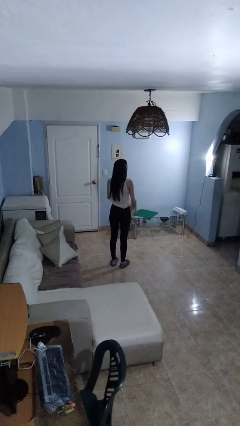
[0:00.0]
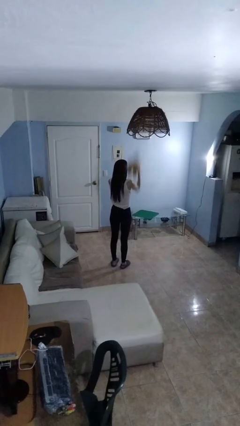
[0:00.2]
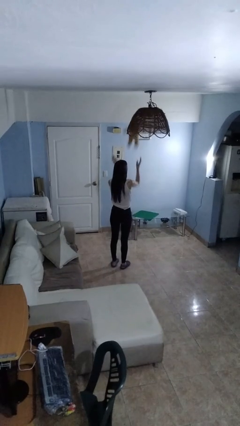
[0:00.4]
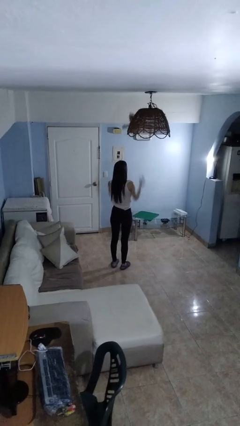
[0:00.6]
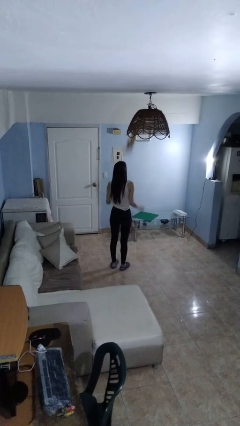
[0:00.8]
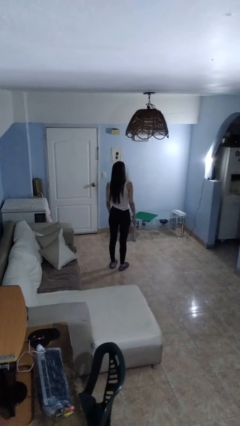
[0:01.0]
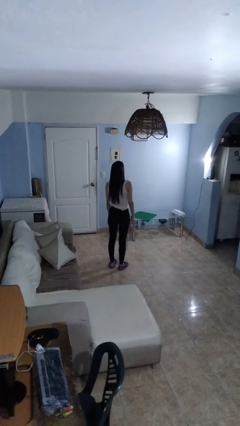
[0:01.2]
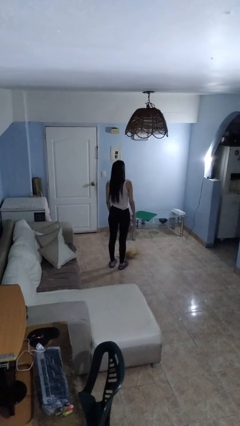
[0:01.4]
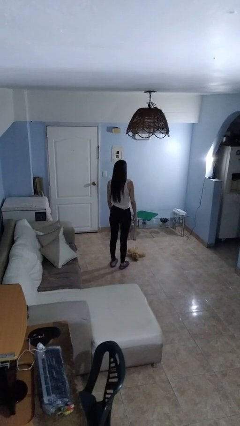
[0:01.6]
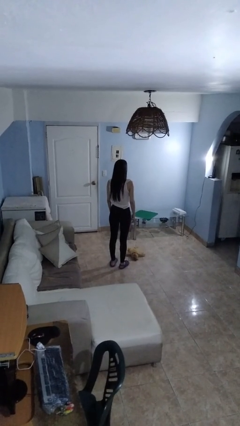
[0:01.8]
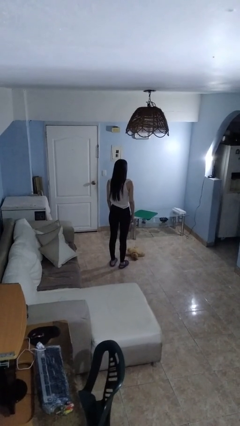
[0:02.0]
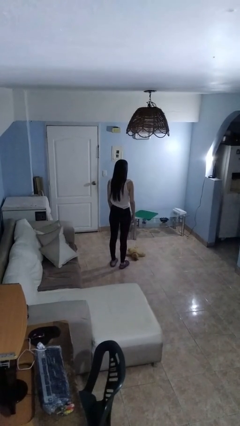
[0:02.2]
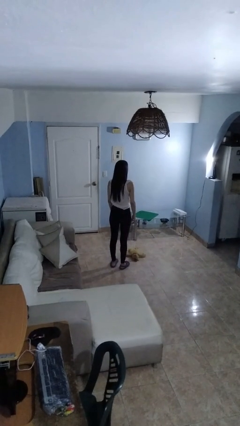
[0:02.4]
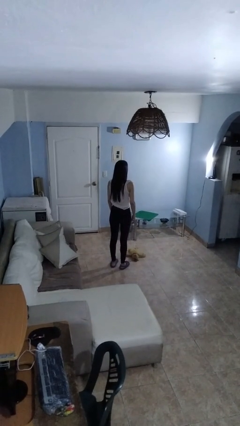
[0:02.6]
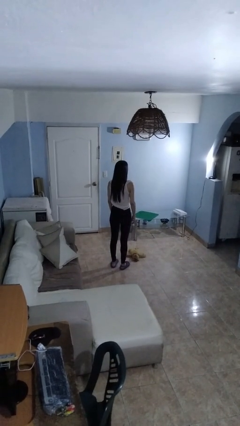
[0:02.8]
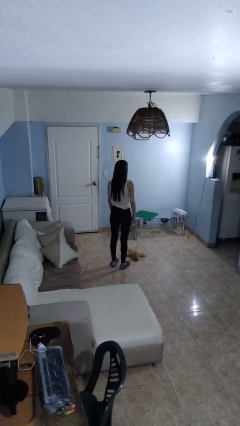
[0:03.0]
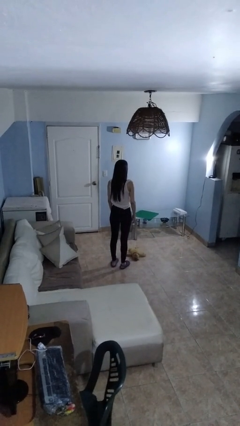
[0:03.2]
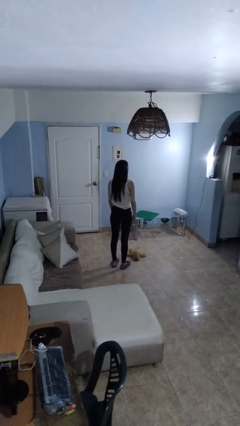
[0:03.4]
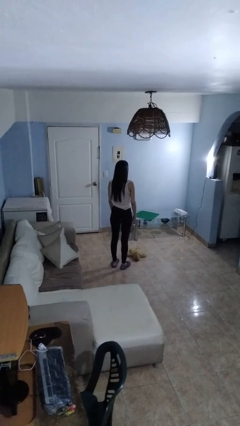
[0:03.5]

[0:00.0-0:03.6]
person throws object into air

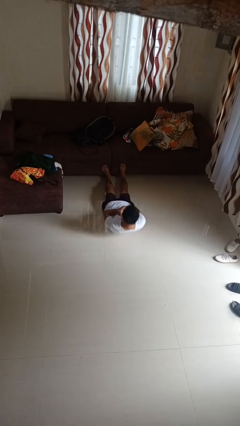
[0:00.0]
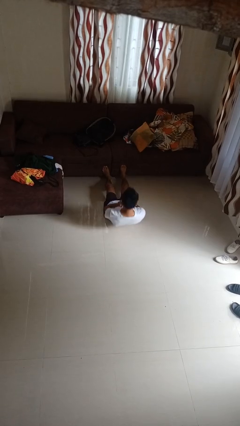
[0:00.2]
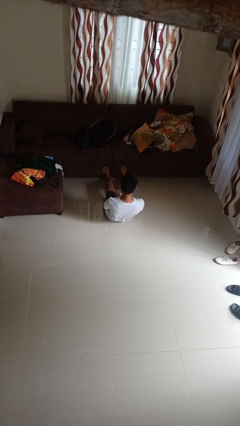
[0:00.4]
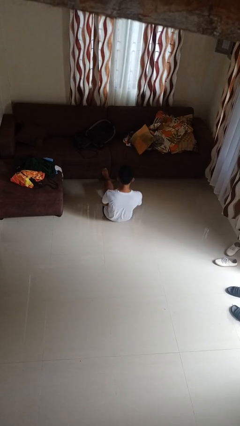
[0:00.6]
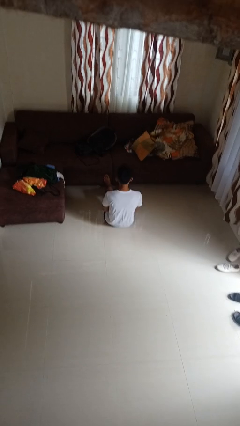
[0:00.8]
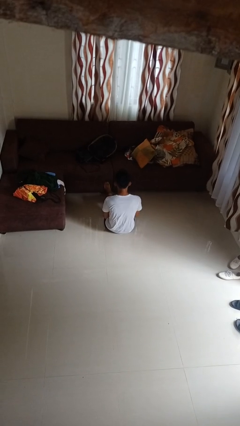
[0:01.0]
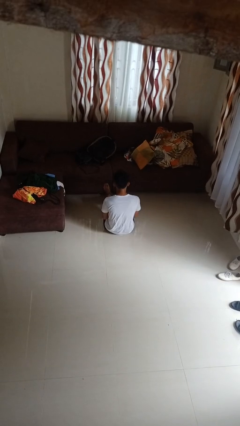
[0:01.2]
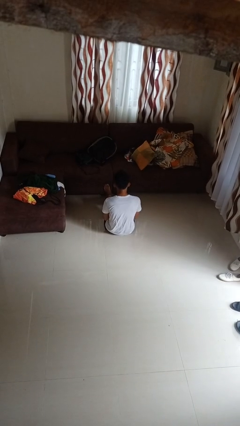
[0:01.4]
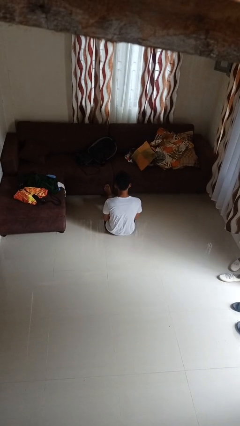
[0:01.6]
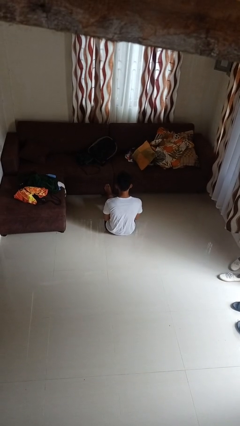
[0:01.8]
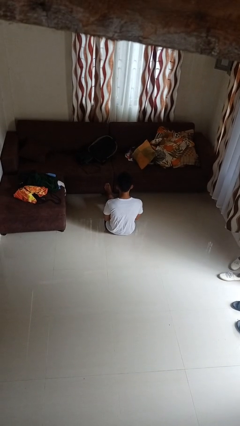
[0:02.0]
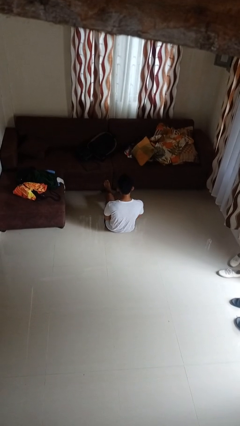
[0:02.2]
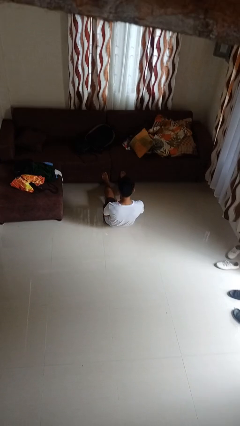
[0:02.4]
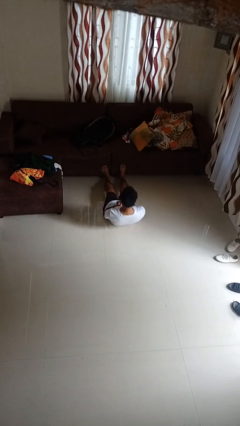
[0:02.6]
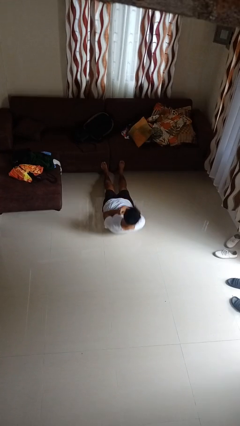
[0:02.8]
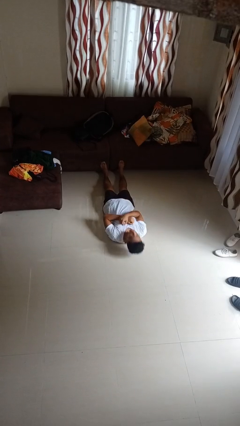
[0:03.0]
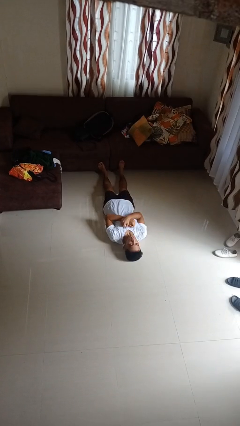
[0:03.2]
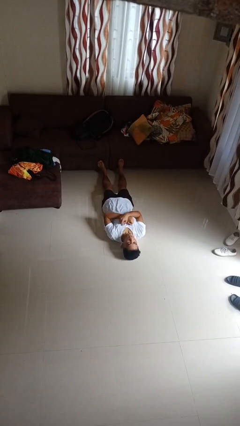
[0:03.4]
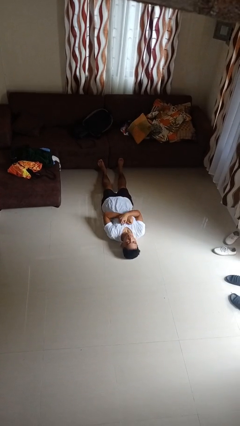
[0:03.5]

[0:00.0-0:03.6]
person exercises with situp

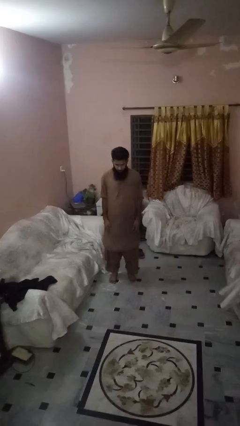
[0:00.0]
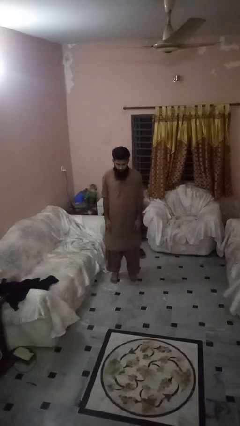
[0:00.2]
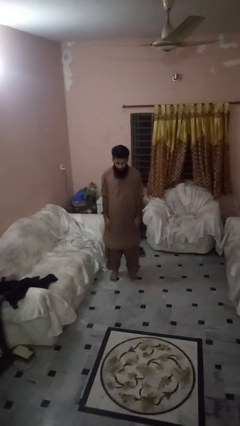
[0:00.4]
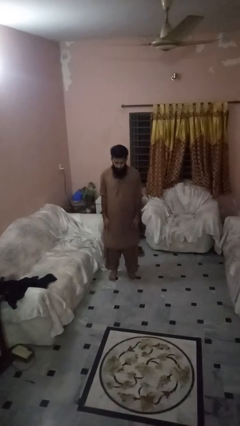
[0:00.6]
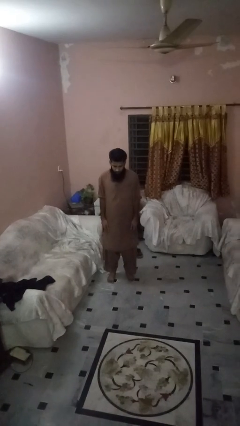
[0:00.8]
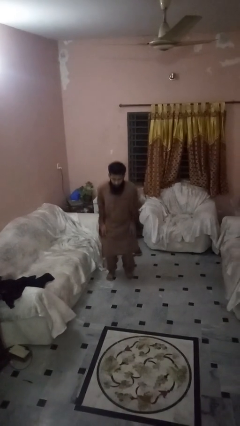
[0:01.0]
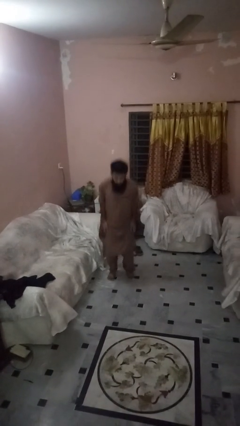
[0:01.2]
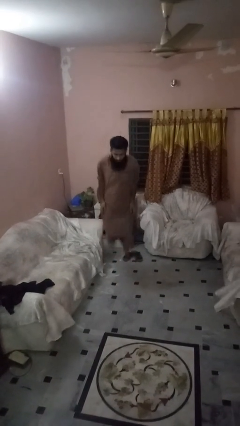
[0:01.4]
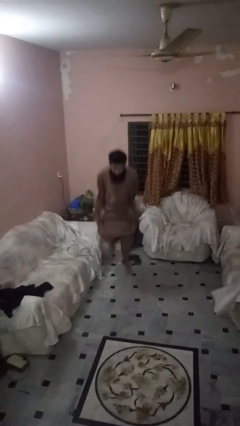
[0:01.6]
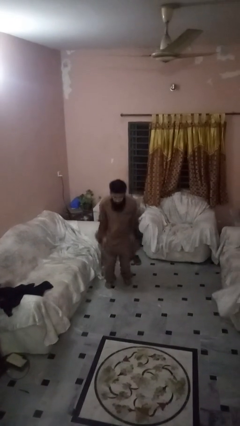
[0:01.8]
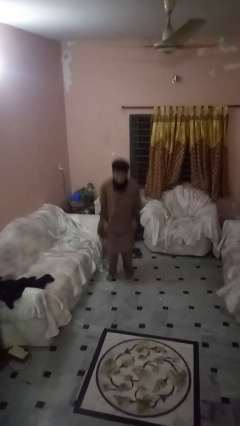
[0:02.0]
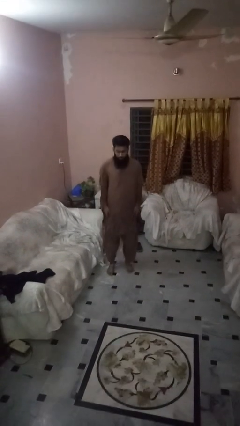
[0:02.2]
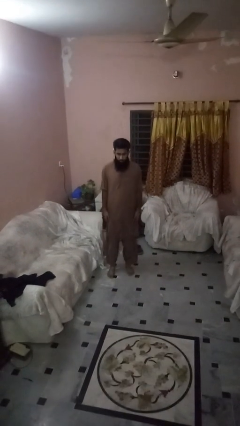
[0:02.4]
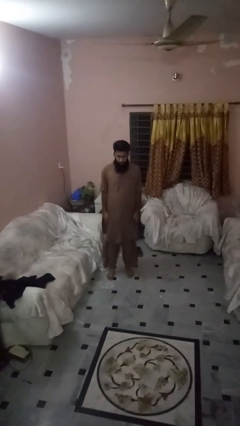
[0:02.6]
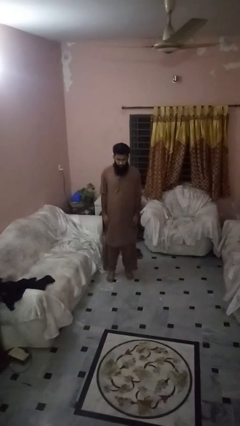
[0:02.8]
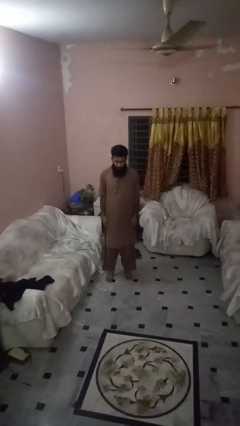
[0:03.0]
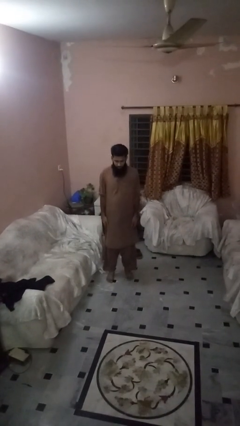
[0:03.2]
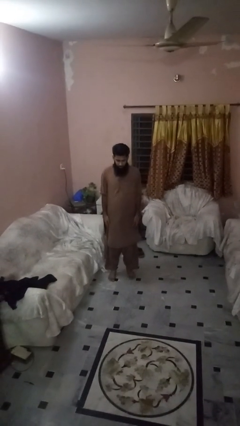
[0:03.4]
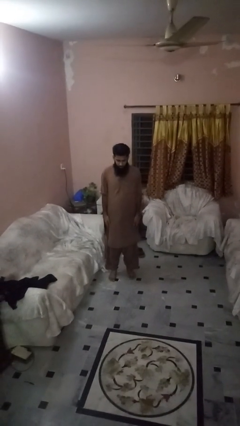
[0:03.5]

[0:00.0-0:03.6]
person jumps

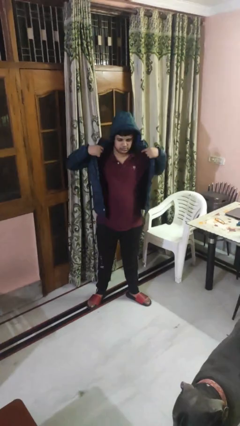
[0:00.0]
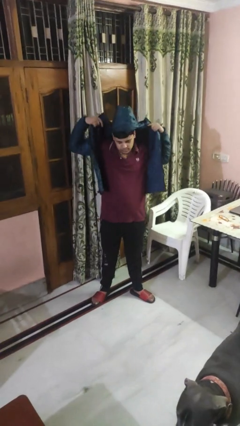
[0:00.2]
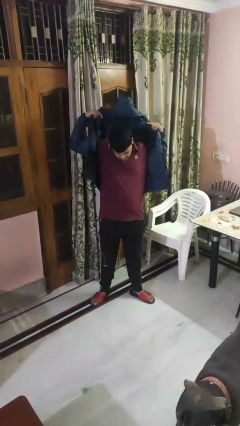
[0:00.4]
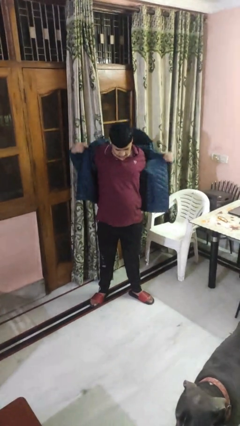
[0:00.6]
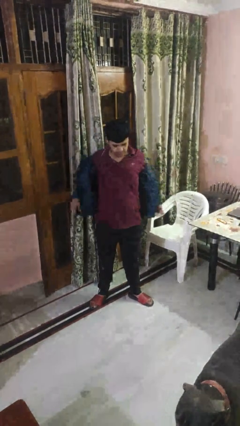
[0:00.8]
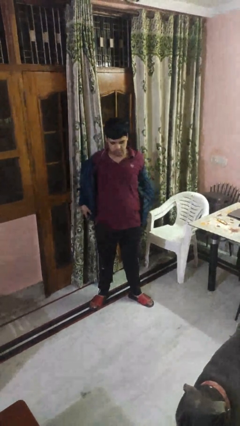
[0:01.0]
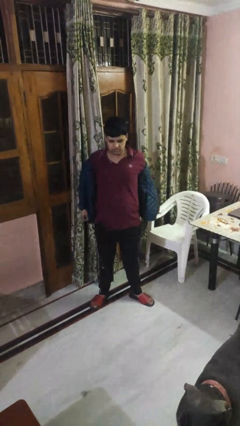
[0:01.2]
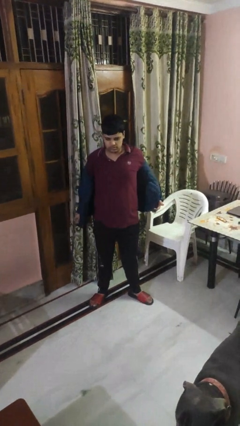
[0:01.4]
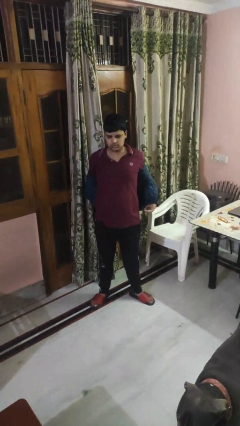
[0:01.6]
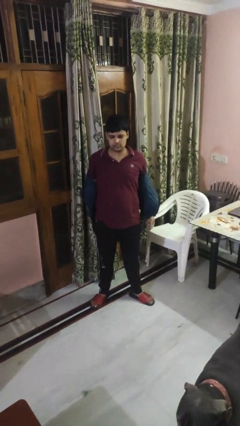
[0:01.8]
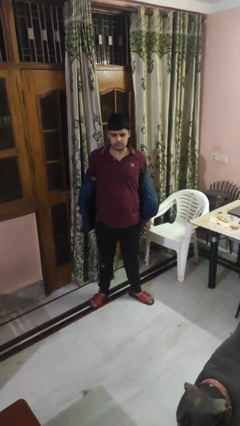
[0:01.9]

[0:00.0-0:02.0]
person takes off hoodie

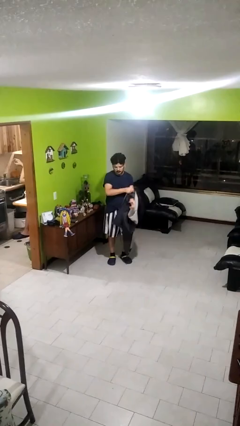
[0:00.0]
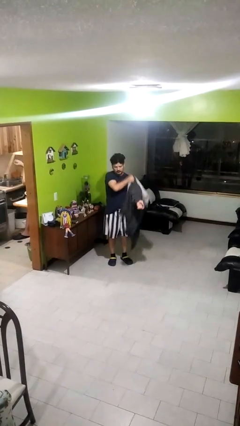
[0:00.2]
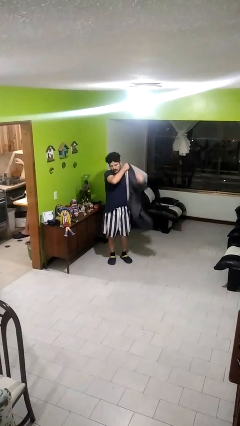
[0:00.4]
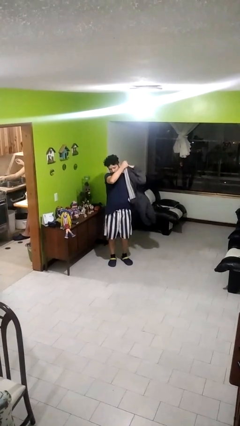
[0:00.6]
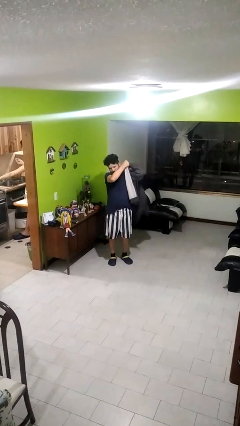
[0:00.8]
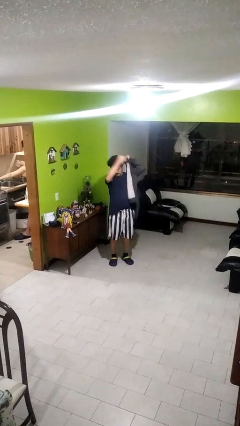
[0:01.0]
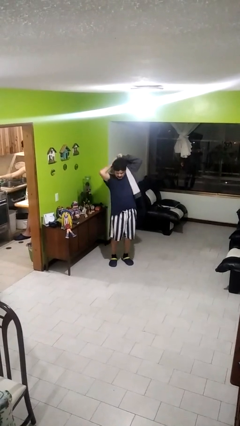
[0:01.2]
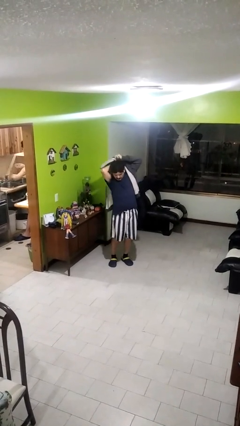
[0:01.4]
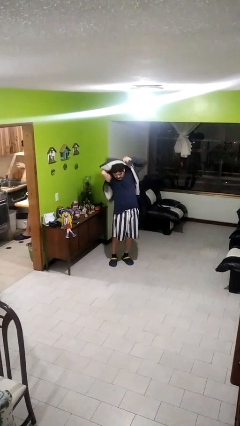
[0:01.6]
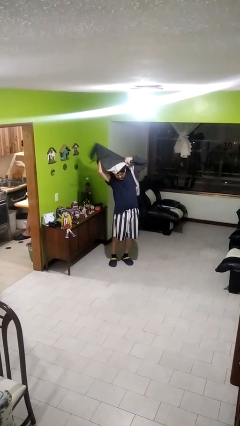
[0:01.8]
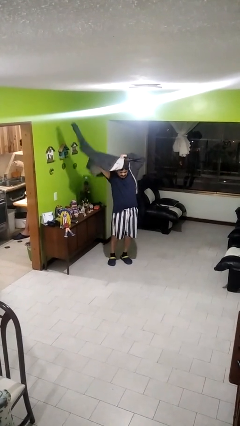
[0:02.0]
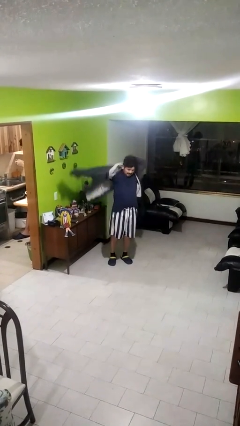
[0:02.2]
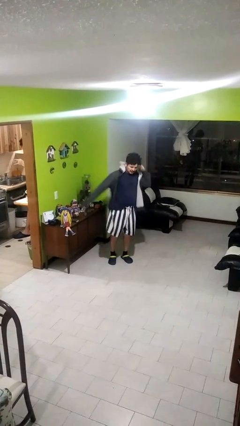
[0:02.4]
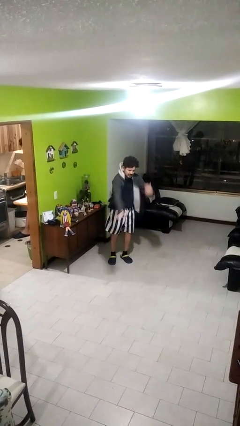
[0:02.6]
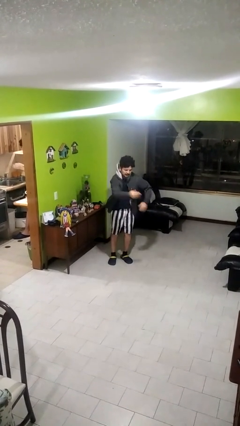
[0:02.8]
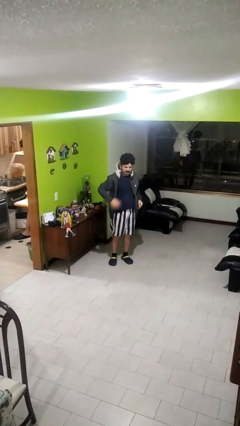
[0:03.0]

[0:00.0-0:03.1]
person puts on jacket

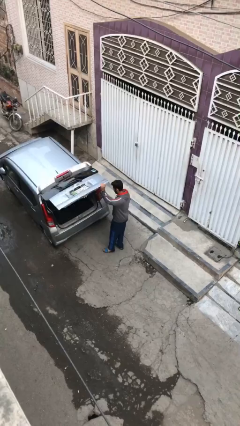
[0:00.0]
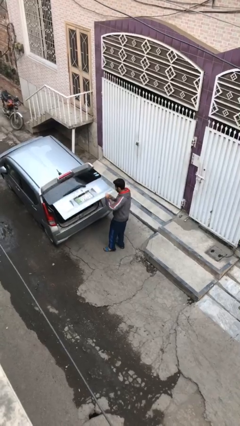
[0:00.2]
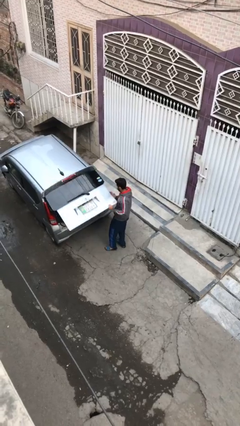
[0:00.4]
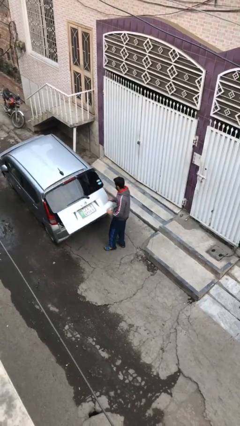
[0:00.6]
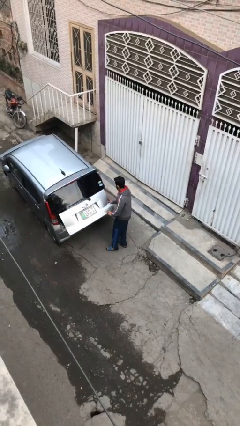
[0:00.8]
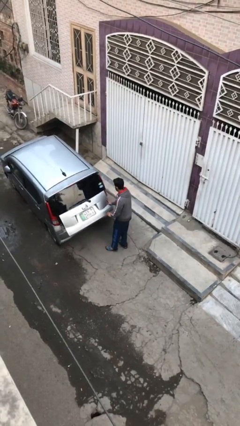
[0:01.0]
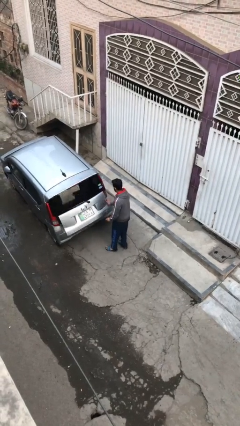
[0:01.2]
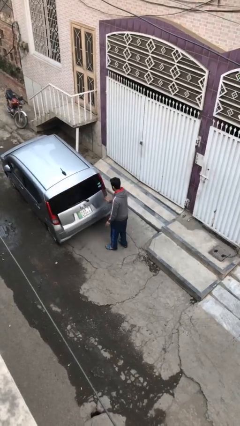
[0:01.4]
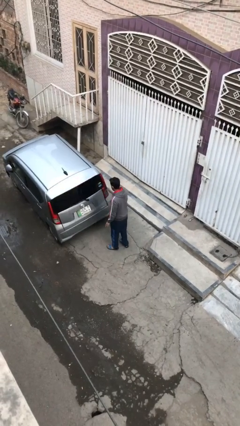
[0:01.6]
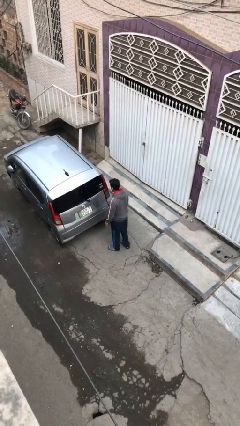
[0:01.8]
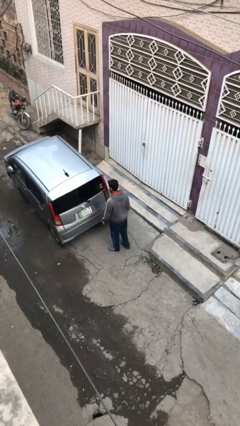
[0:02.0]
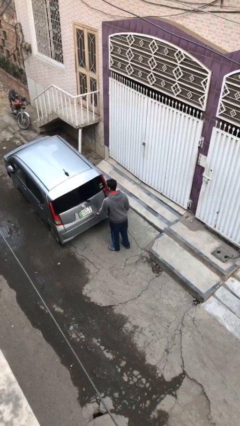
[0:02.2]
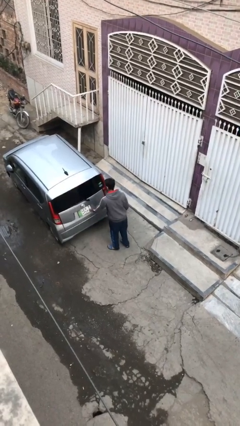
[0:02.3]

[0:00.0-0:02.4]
person closes car trunk
